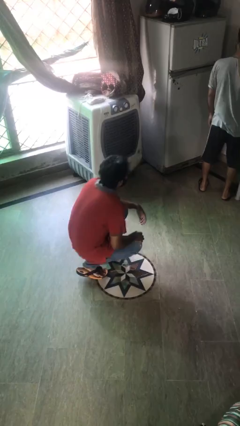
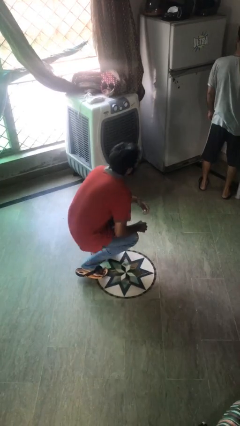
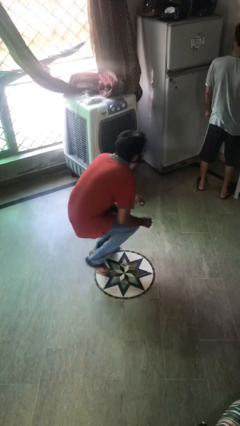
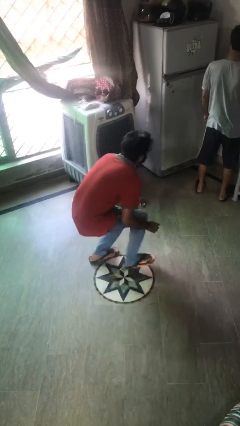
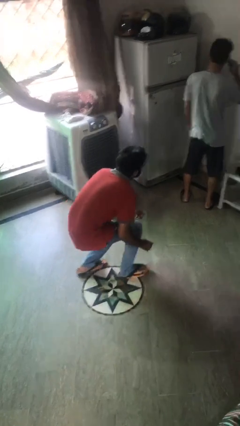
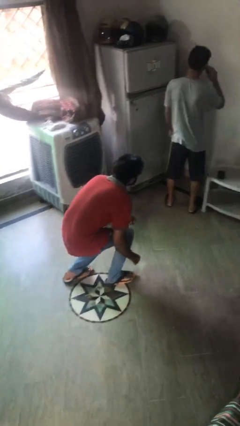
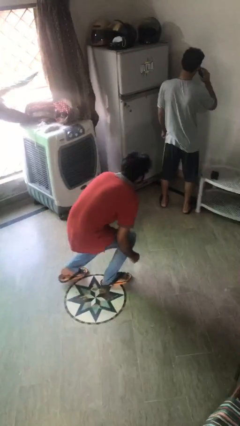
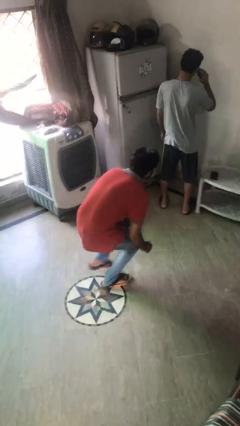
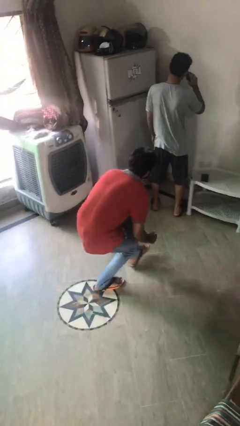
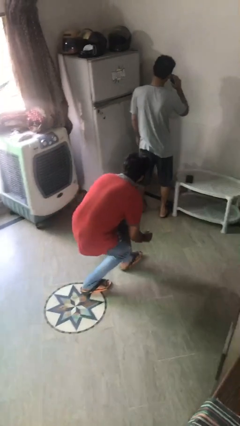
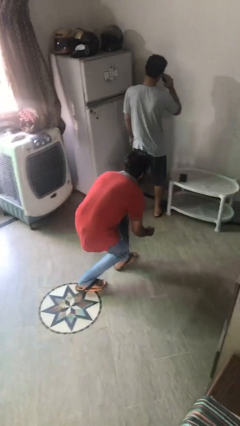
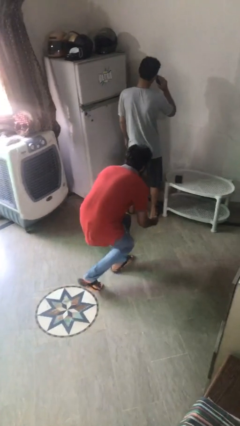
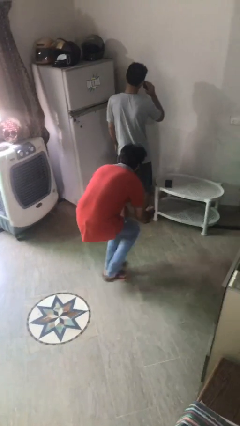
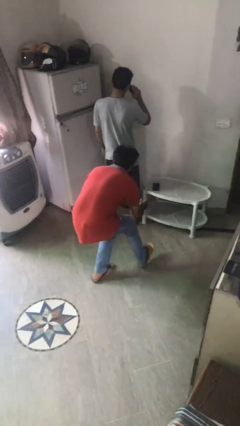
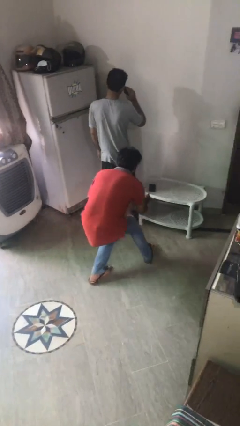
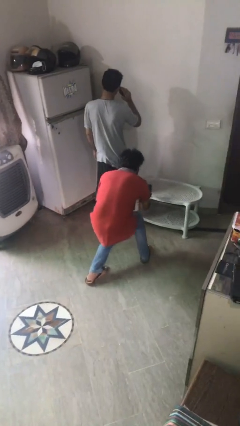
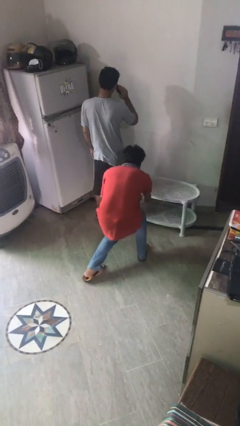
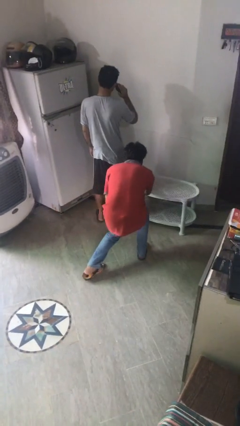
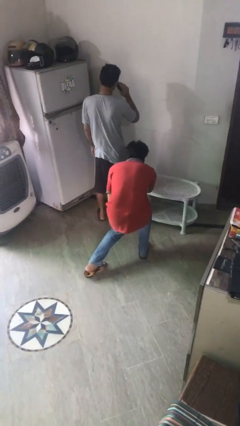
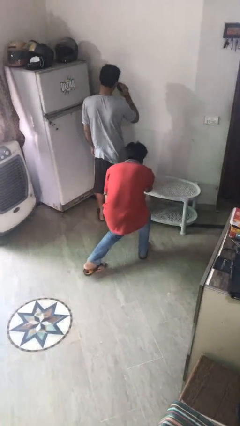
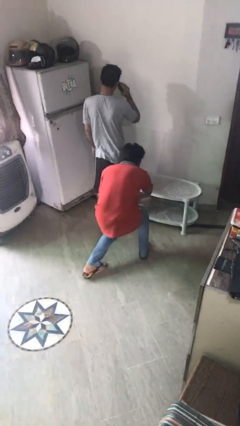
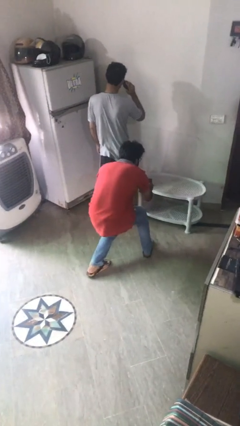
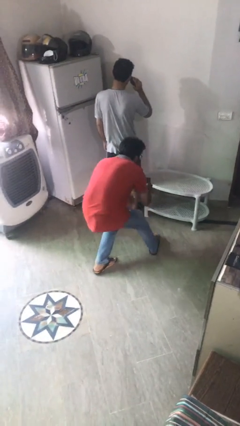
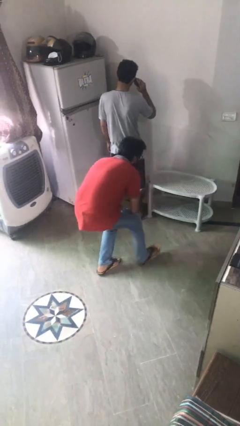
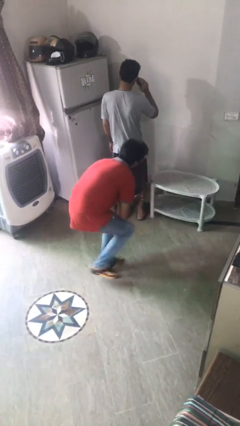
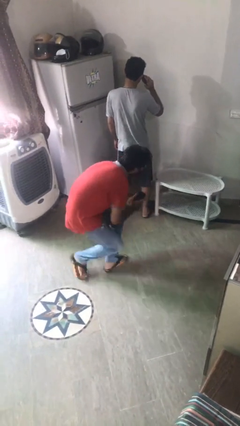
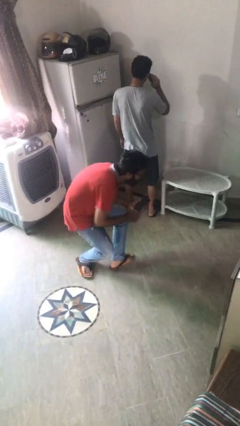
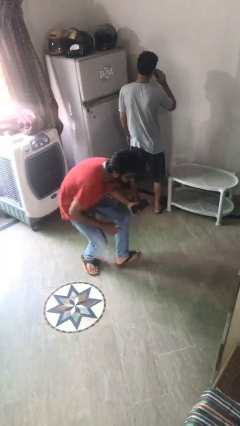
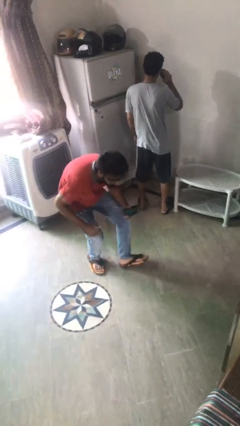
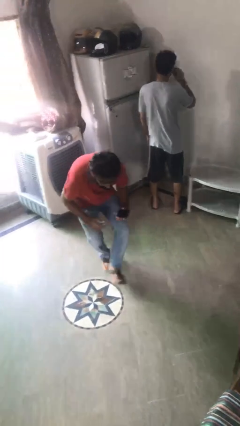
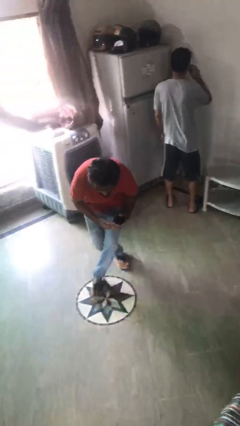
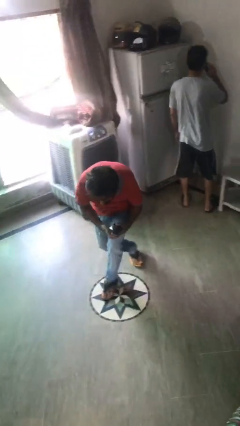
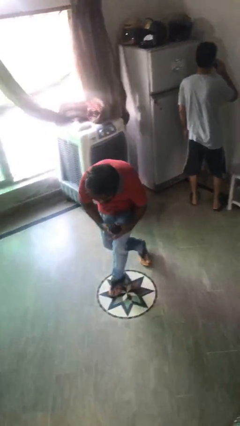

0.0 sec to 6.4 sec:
person steals object from person

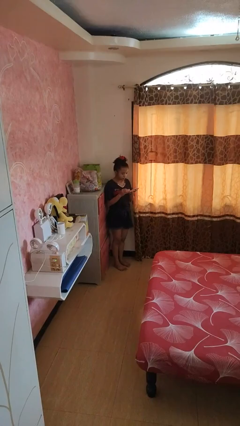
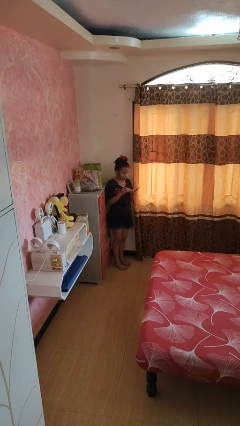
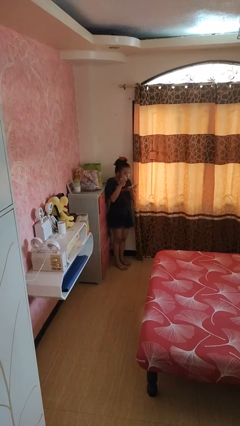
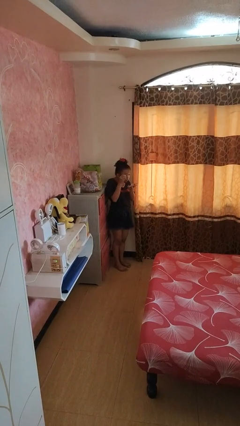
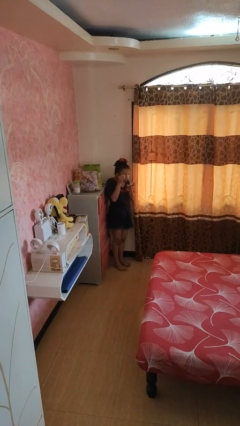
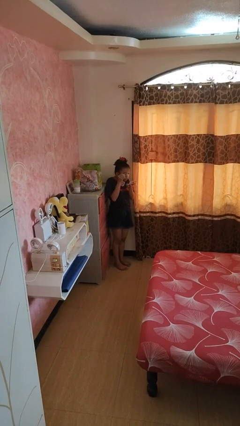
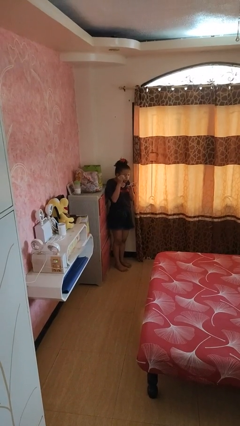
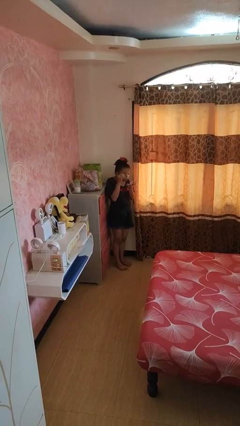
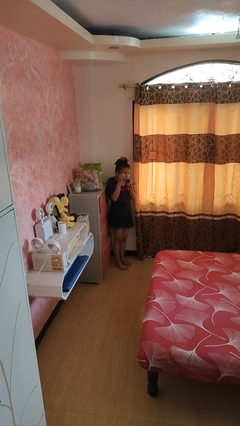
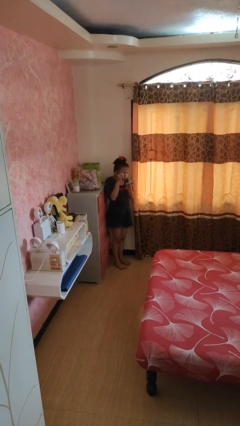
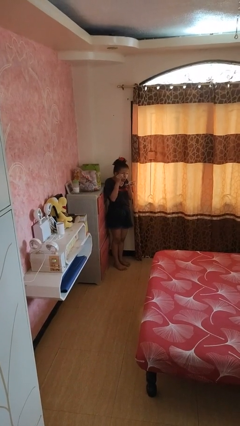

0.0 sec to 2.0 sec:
person applies eye makeup

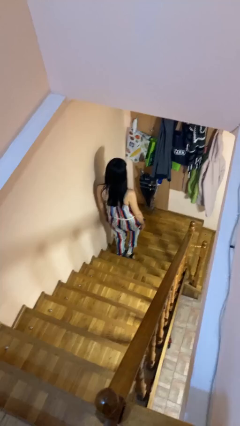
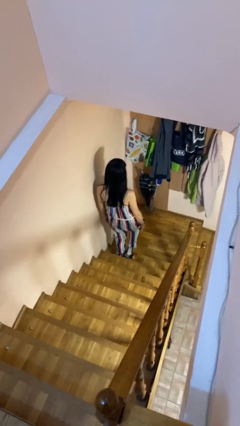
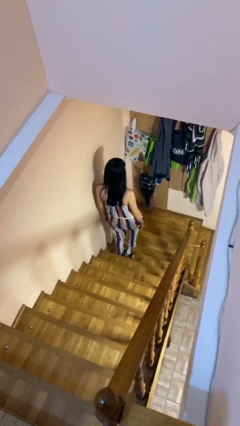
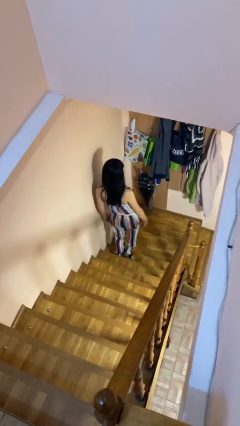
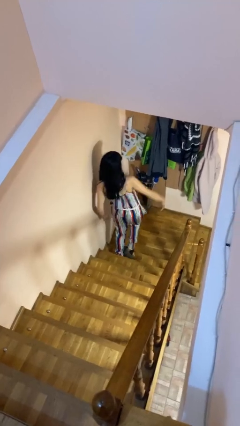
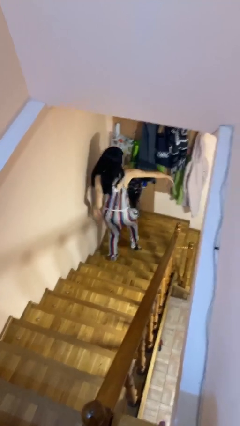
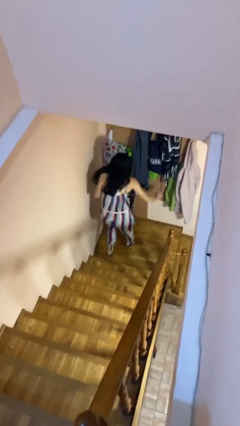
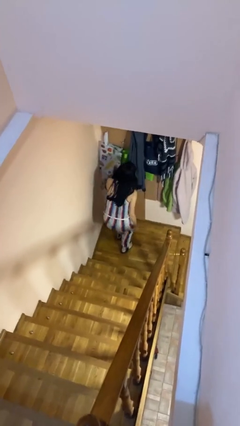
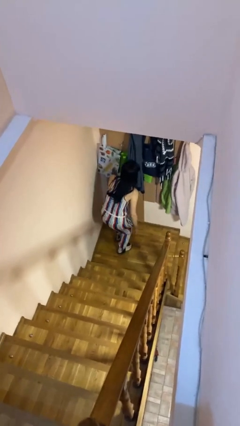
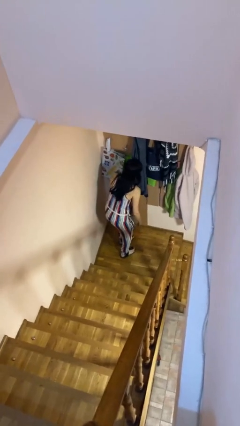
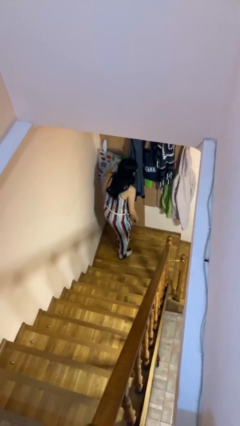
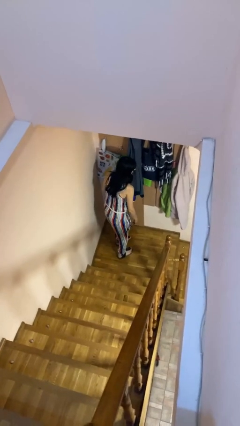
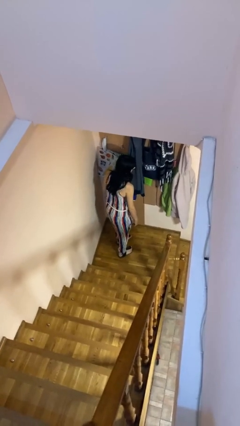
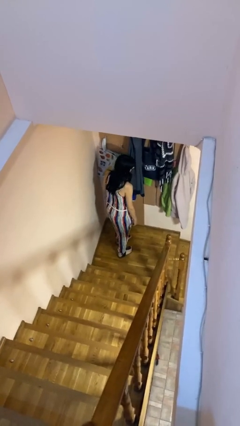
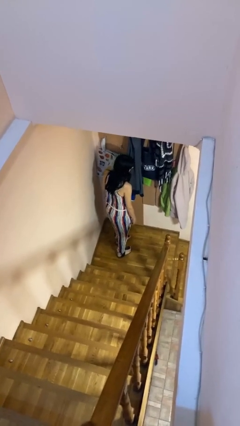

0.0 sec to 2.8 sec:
person trips on stair

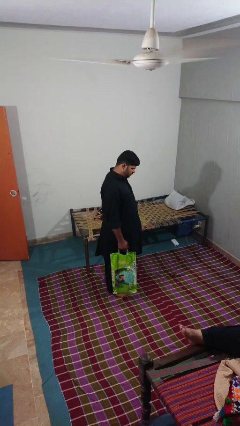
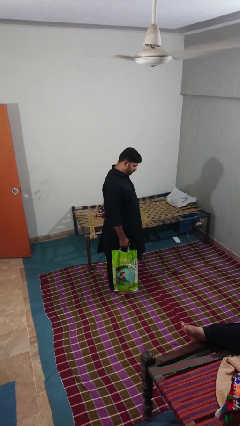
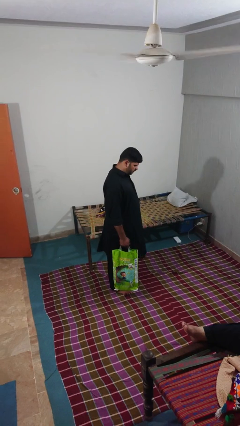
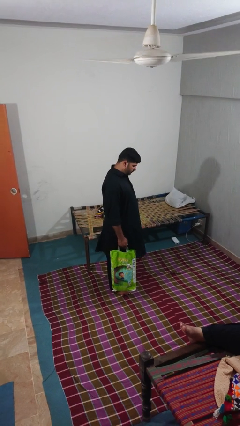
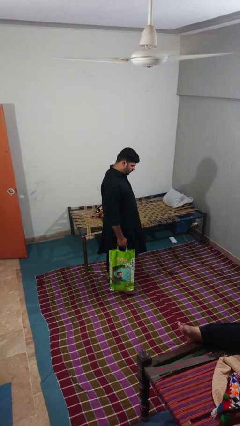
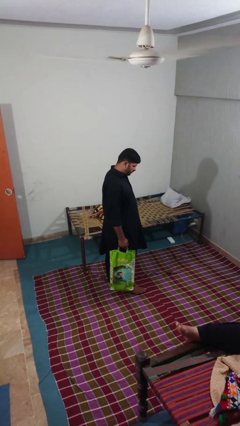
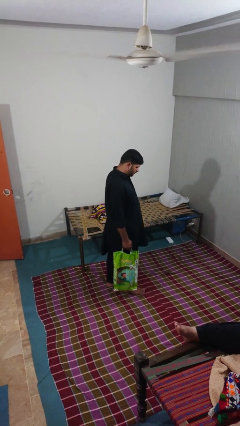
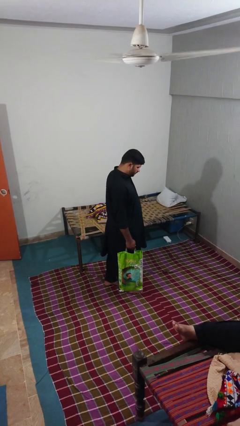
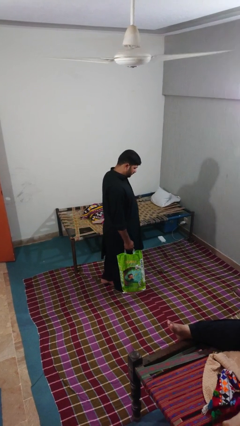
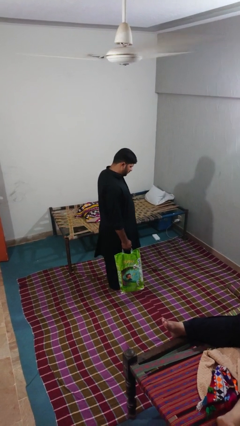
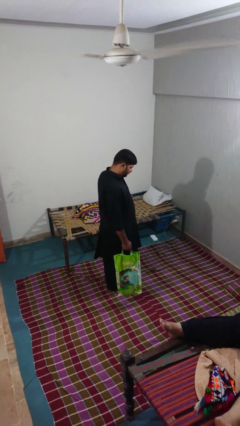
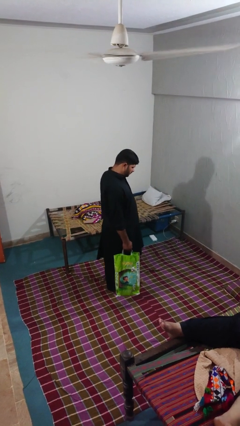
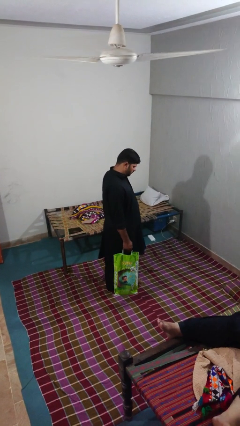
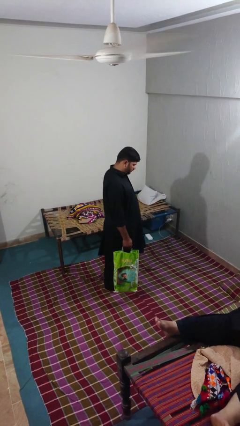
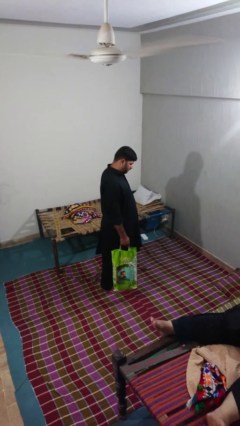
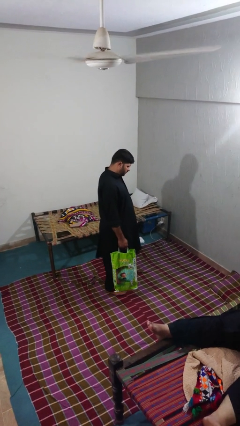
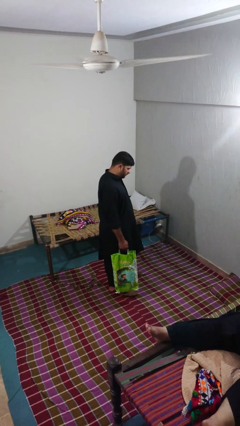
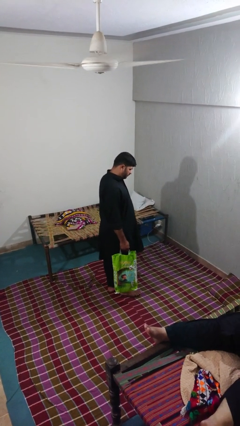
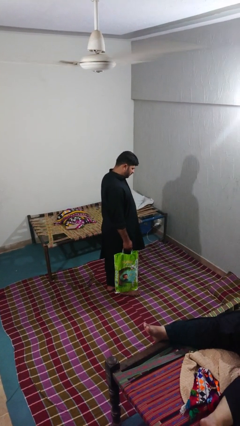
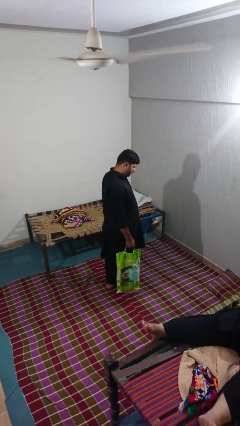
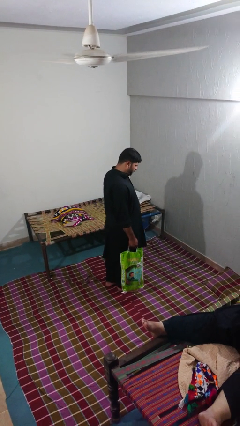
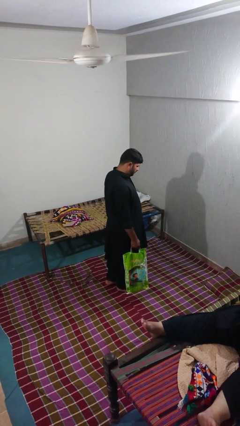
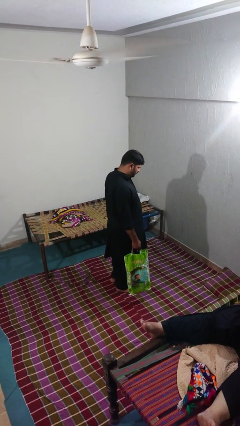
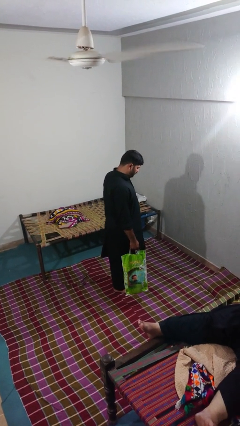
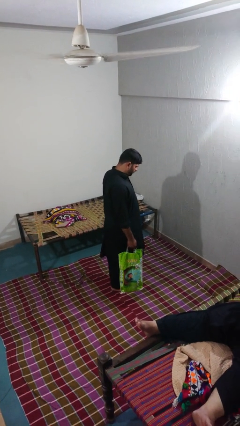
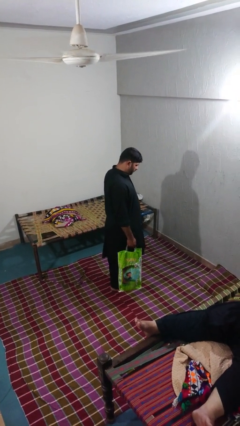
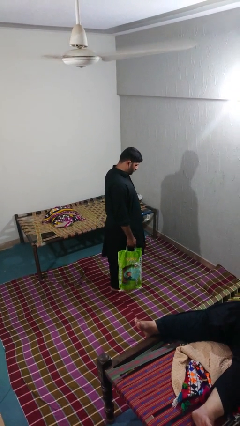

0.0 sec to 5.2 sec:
person carries groceries

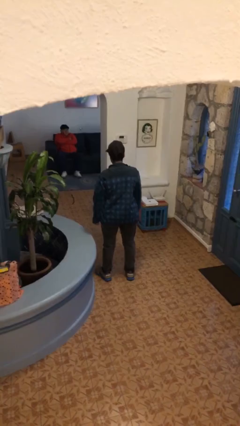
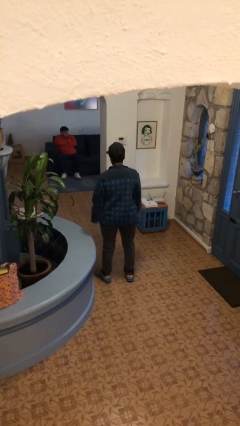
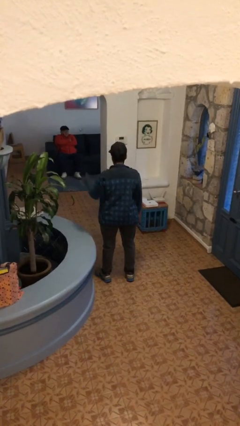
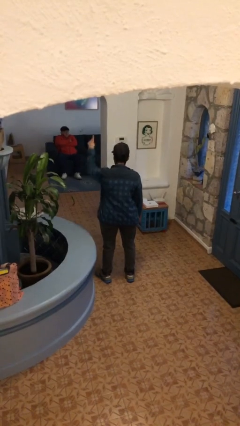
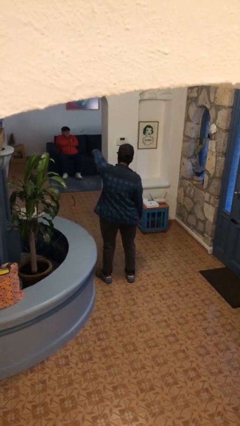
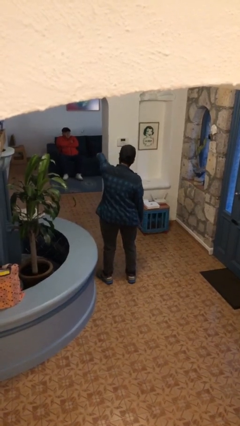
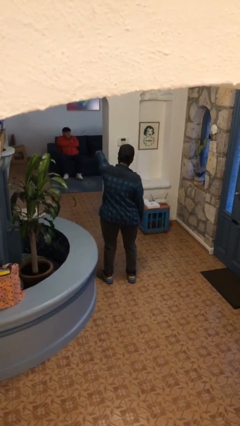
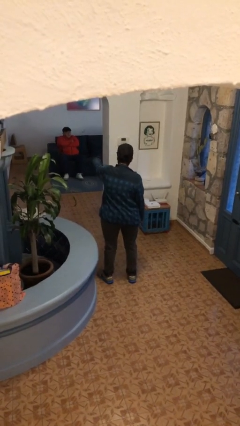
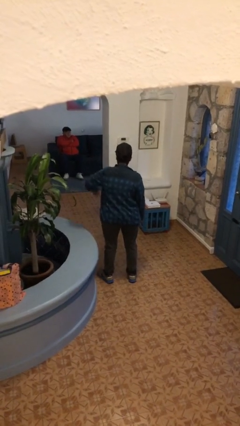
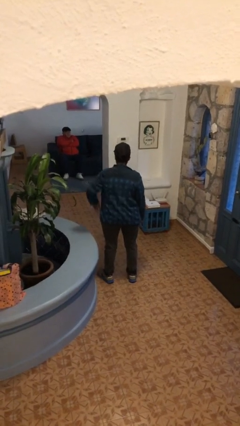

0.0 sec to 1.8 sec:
person points at person
